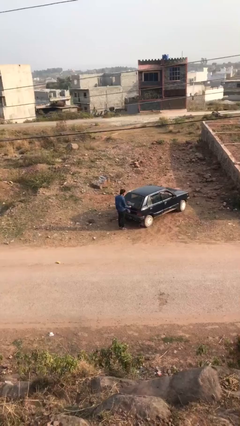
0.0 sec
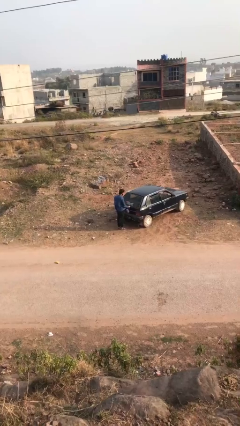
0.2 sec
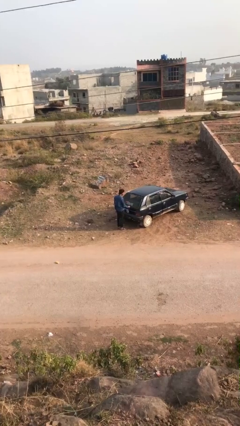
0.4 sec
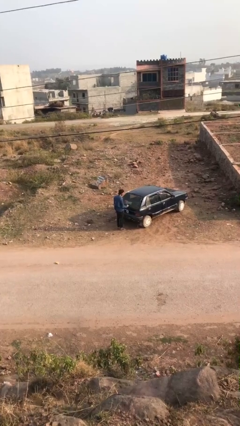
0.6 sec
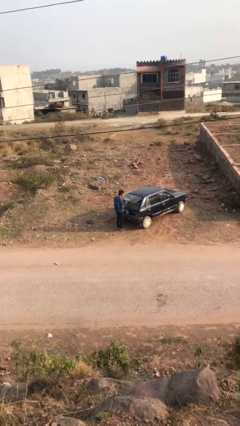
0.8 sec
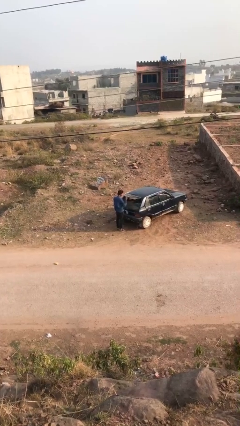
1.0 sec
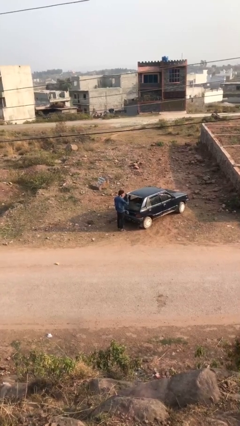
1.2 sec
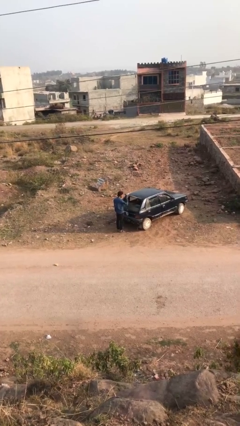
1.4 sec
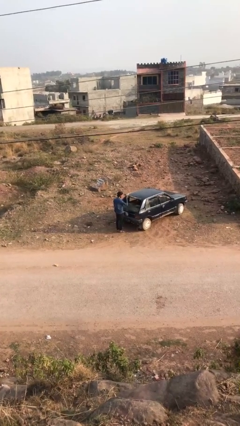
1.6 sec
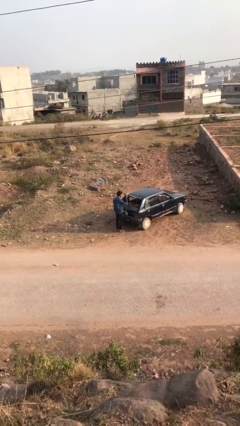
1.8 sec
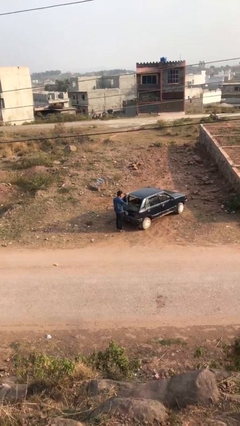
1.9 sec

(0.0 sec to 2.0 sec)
person opens car trunk

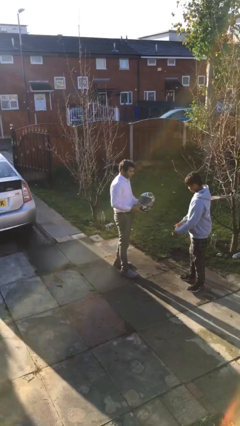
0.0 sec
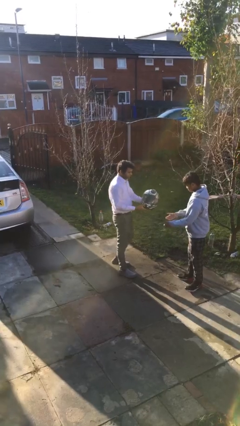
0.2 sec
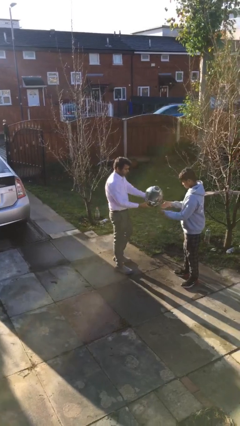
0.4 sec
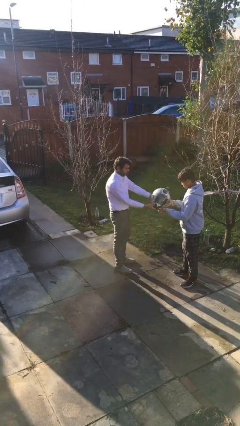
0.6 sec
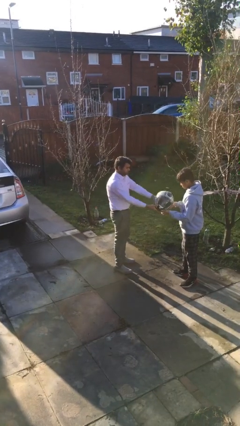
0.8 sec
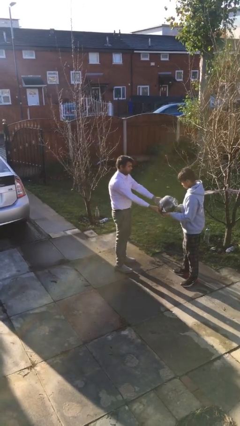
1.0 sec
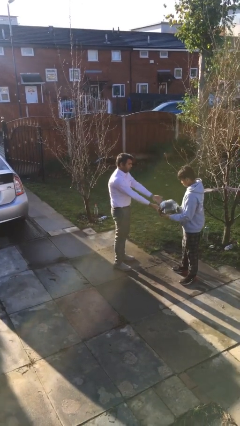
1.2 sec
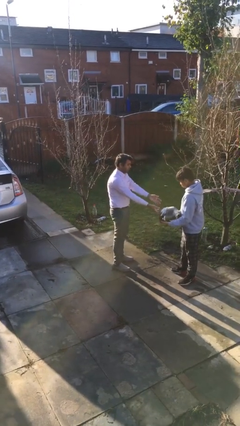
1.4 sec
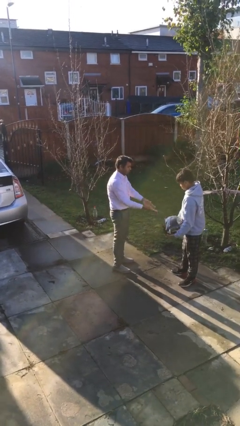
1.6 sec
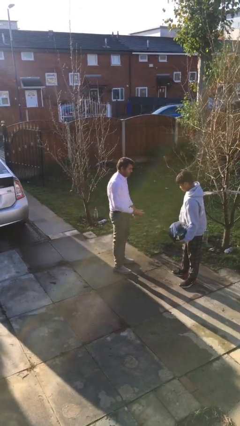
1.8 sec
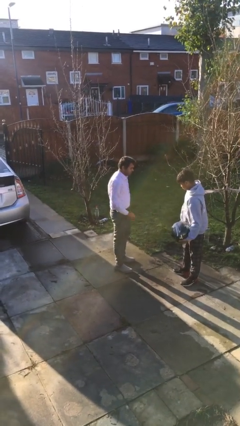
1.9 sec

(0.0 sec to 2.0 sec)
person transfers object to person

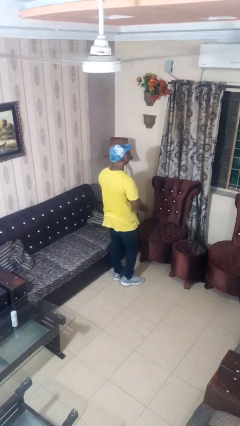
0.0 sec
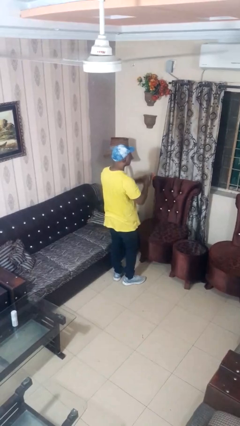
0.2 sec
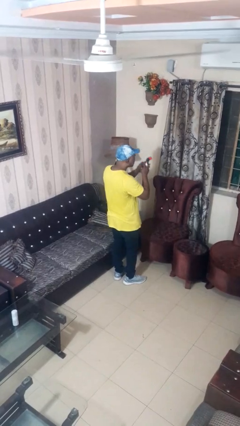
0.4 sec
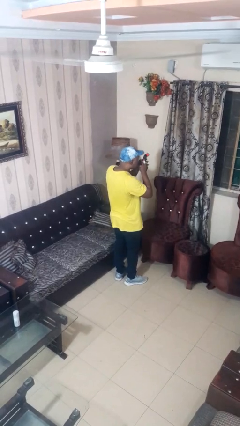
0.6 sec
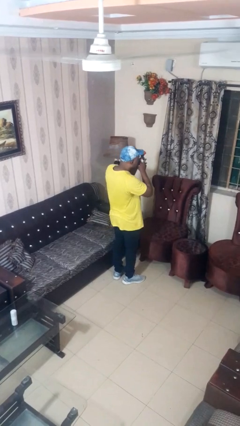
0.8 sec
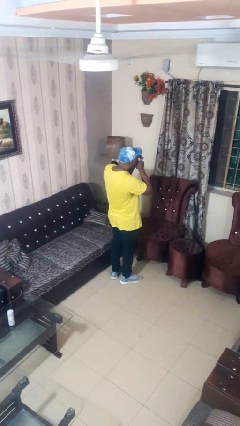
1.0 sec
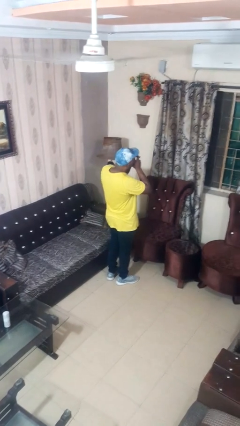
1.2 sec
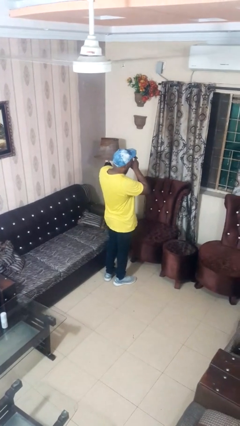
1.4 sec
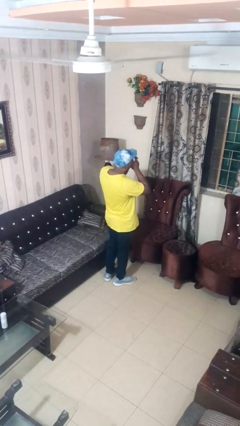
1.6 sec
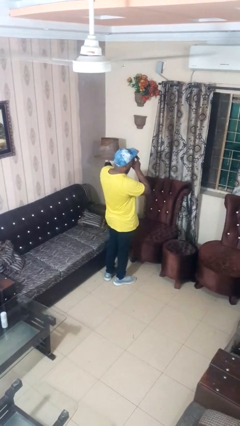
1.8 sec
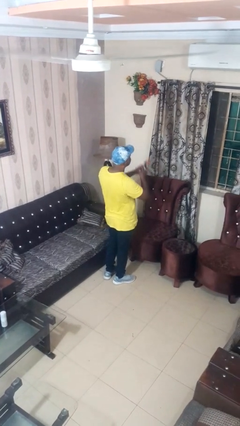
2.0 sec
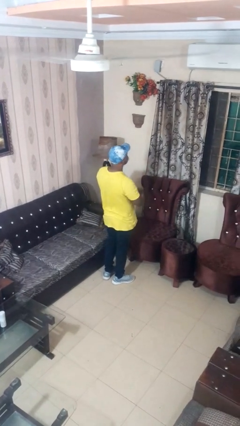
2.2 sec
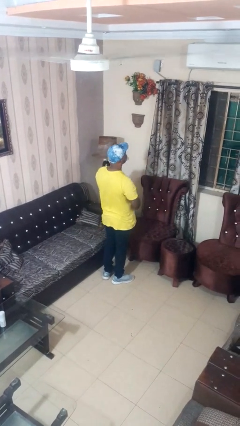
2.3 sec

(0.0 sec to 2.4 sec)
person vapes

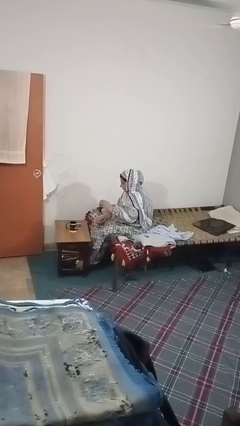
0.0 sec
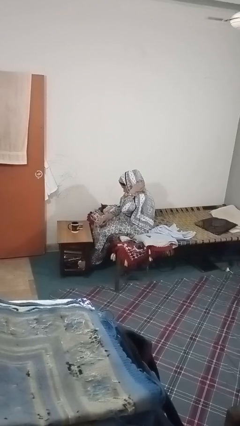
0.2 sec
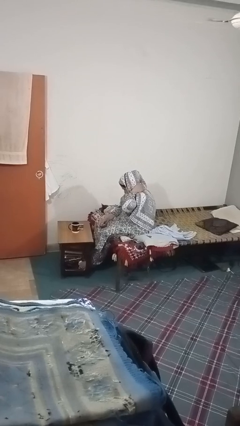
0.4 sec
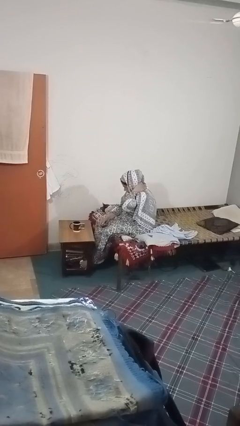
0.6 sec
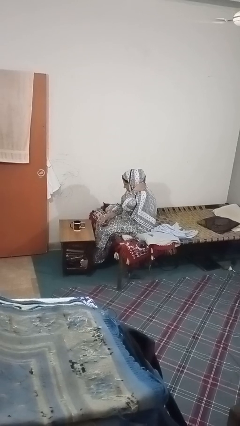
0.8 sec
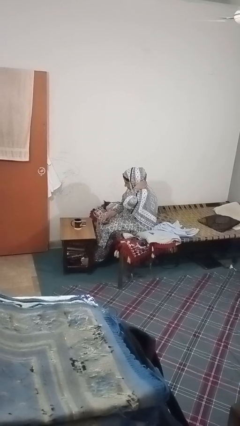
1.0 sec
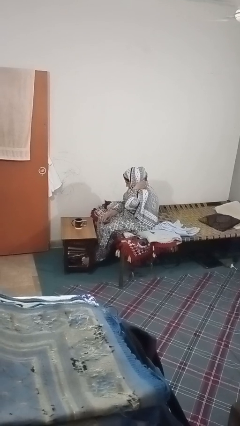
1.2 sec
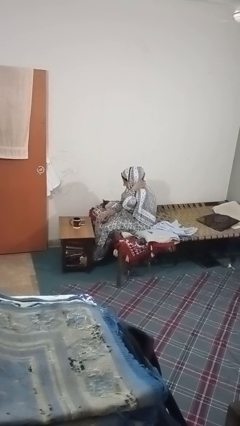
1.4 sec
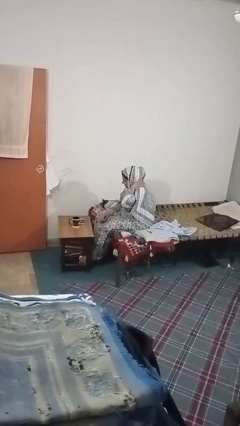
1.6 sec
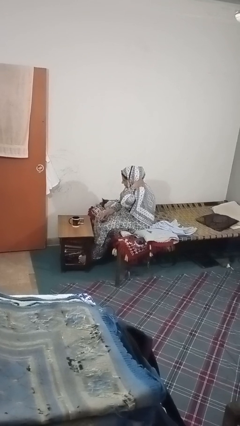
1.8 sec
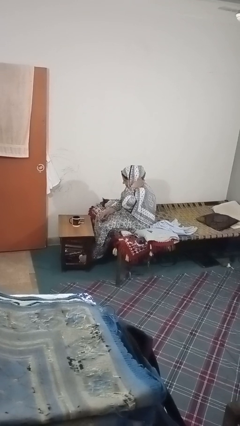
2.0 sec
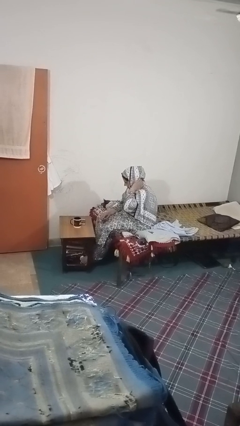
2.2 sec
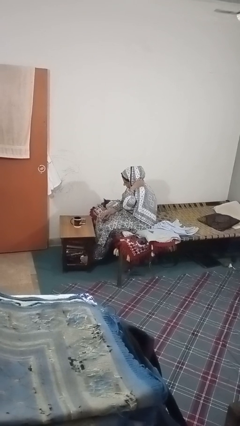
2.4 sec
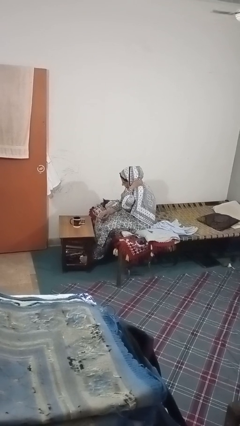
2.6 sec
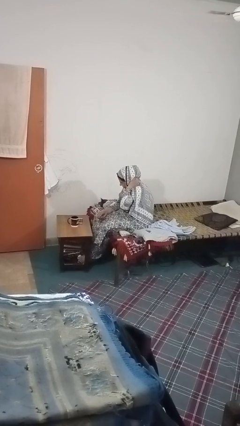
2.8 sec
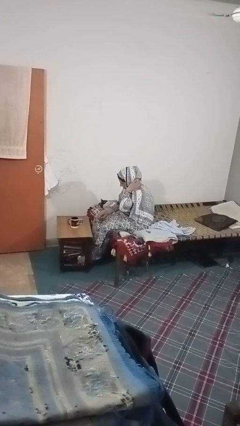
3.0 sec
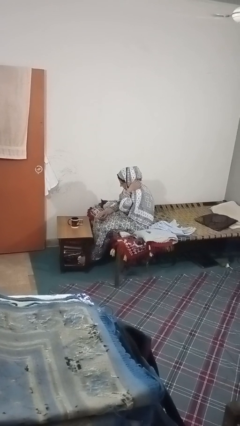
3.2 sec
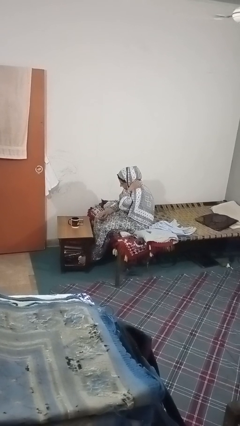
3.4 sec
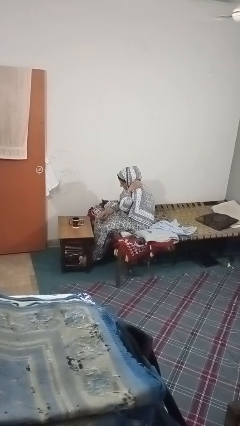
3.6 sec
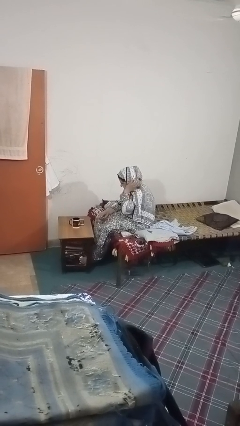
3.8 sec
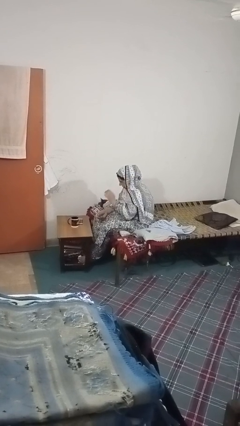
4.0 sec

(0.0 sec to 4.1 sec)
person rubs neck

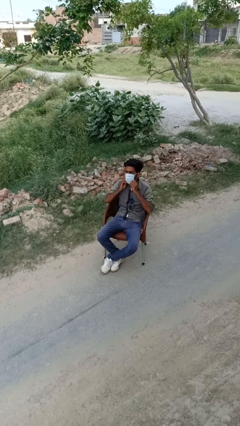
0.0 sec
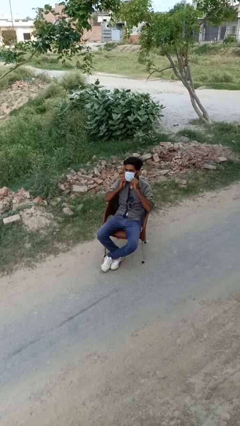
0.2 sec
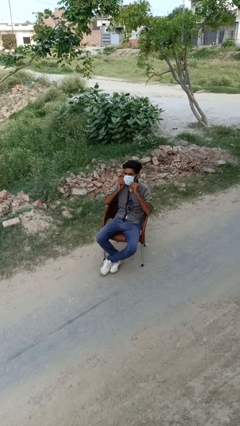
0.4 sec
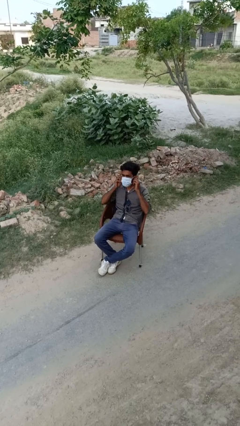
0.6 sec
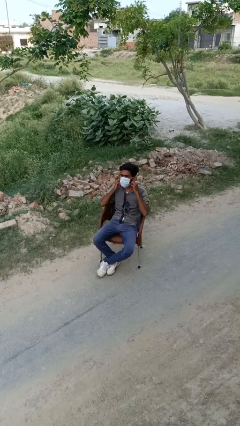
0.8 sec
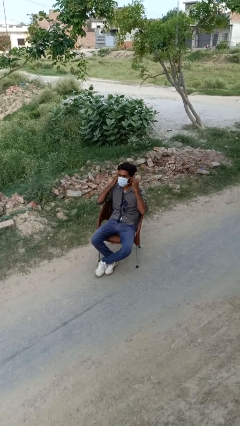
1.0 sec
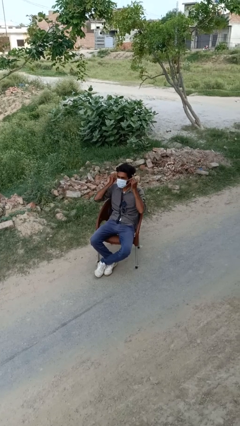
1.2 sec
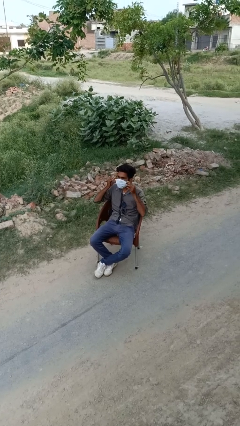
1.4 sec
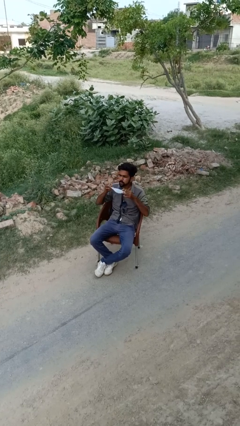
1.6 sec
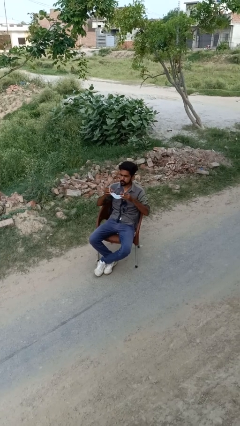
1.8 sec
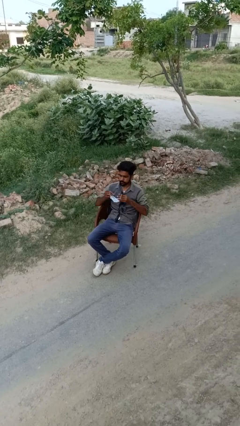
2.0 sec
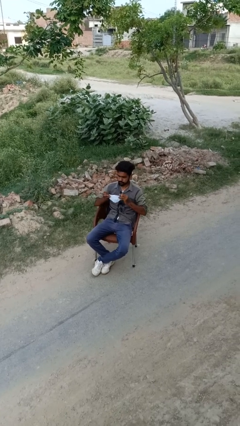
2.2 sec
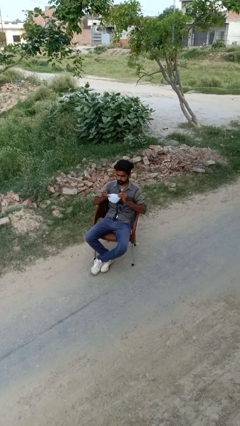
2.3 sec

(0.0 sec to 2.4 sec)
person takes off facemask

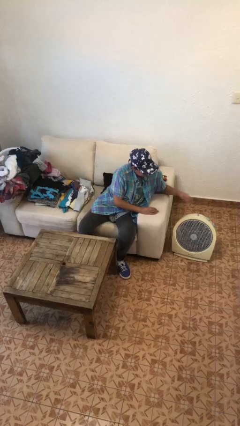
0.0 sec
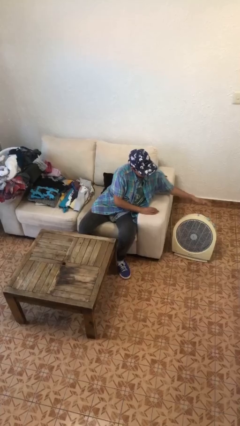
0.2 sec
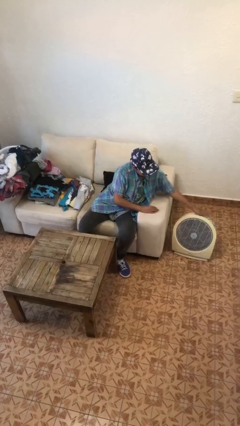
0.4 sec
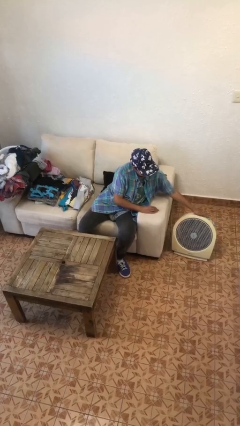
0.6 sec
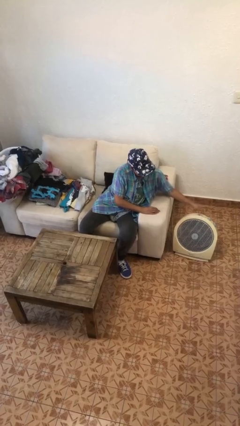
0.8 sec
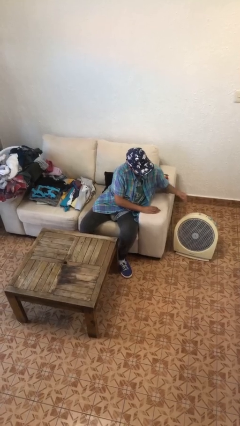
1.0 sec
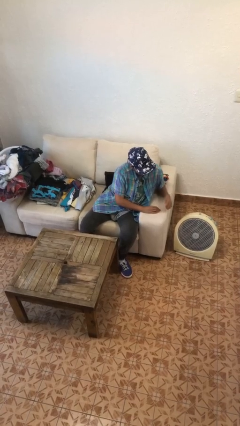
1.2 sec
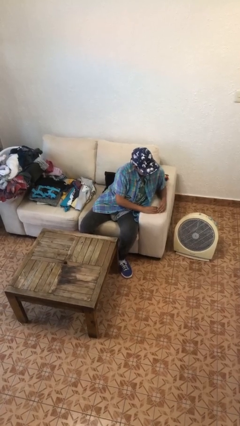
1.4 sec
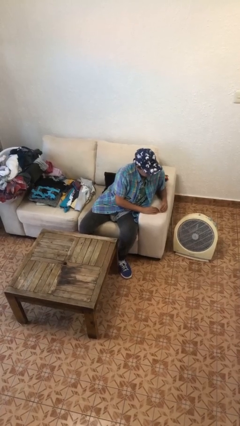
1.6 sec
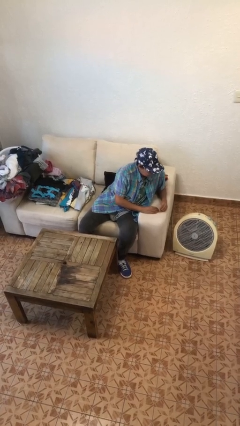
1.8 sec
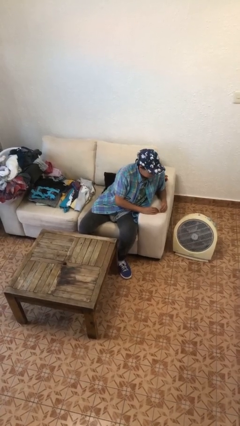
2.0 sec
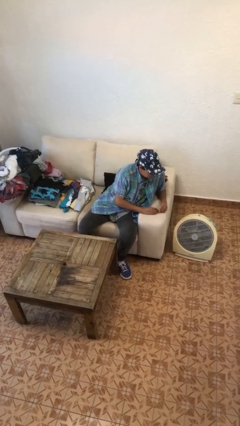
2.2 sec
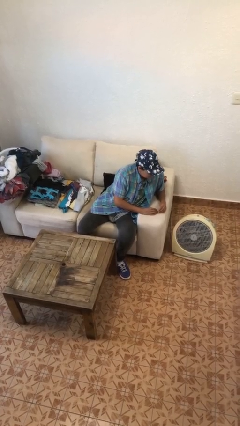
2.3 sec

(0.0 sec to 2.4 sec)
person turns on fan

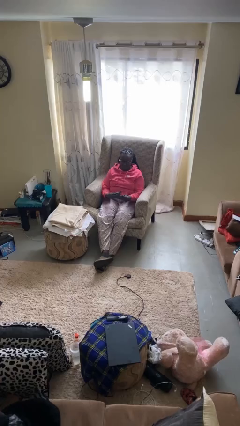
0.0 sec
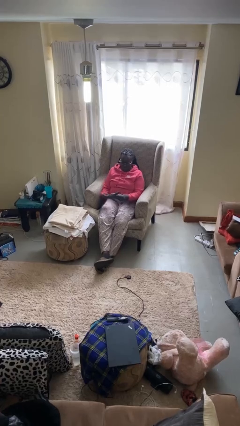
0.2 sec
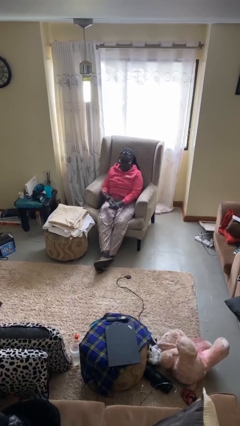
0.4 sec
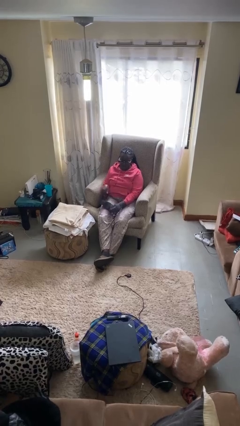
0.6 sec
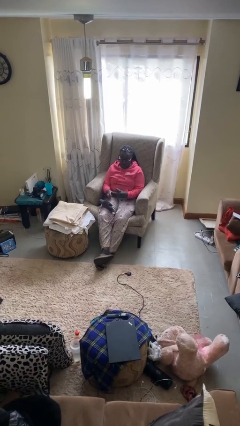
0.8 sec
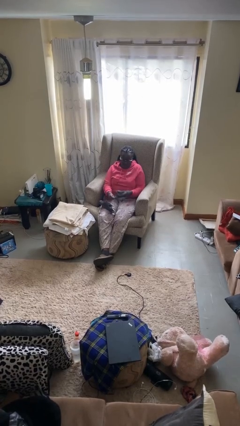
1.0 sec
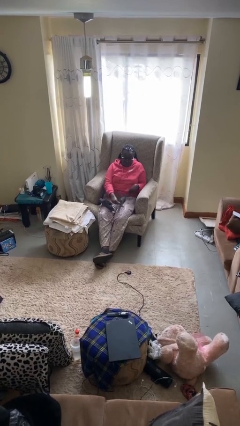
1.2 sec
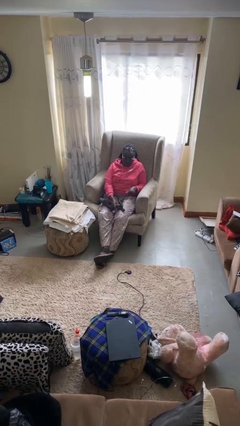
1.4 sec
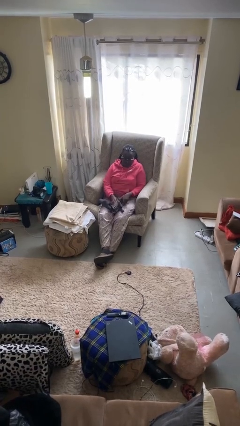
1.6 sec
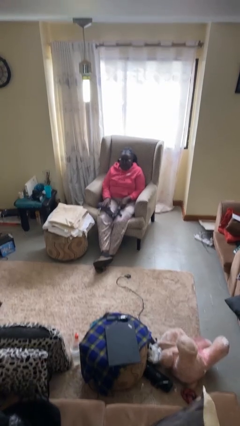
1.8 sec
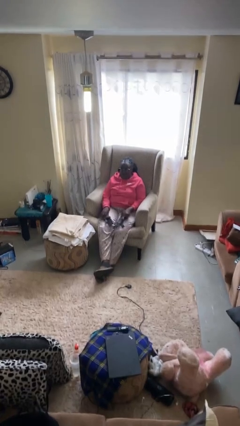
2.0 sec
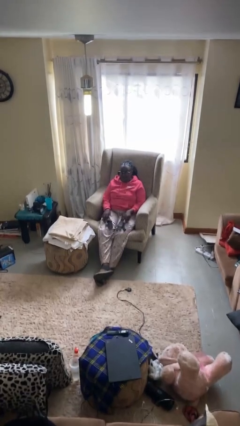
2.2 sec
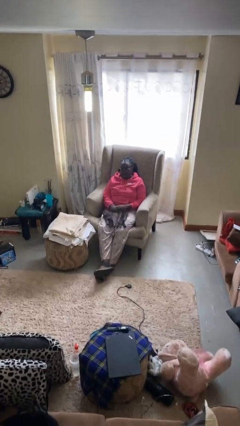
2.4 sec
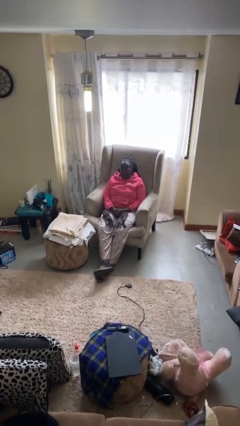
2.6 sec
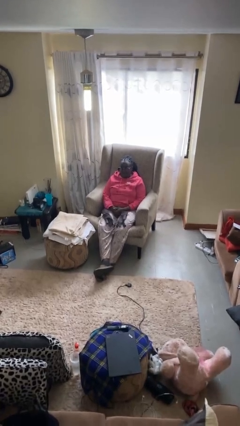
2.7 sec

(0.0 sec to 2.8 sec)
person takes off gloves
